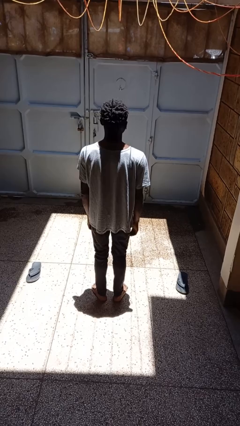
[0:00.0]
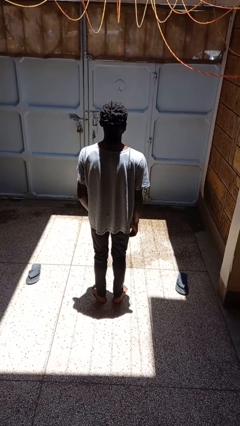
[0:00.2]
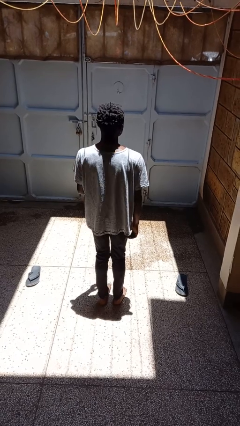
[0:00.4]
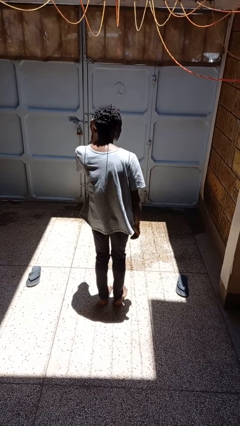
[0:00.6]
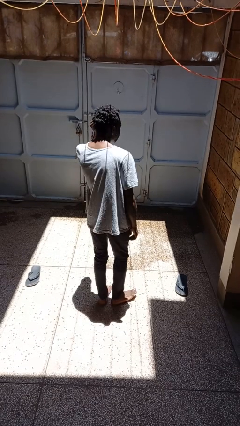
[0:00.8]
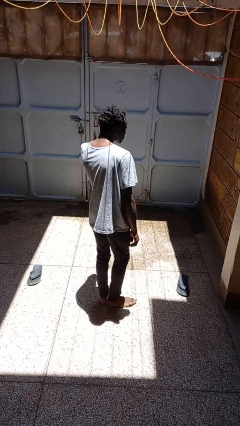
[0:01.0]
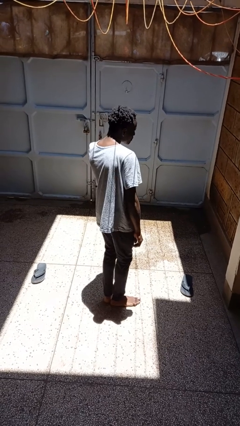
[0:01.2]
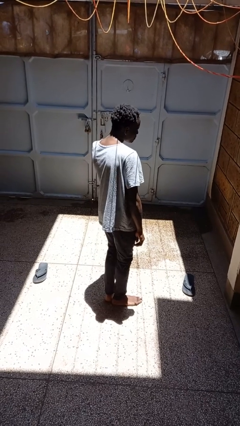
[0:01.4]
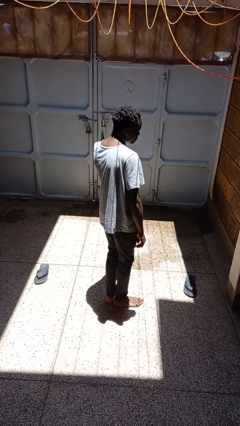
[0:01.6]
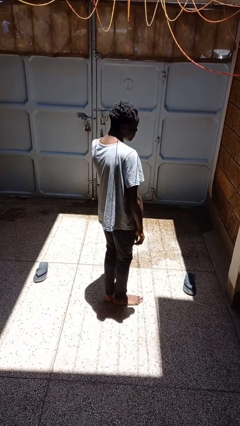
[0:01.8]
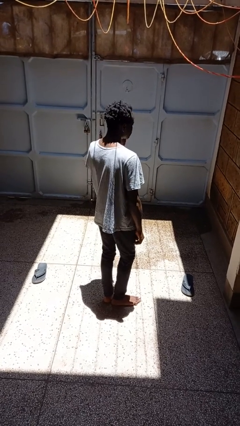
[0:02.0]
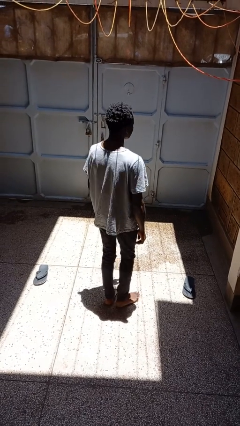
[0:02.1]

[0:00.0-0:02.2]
person touches earlobe

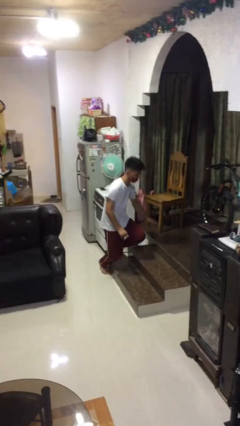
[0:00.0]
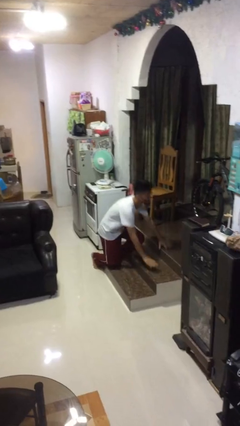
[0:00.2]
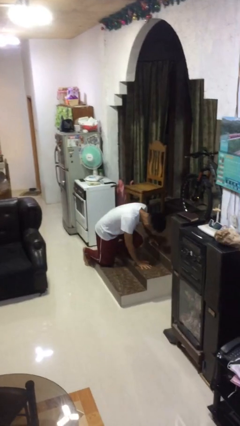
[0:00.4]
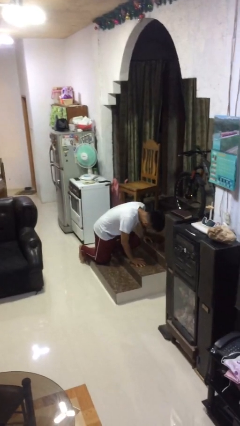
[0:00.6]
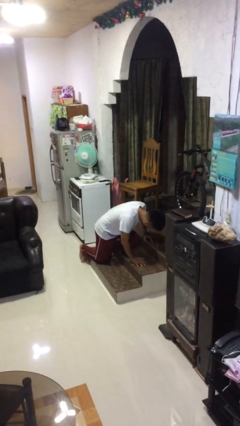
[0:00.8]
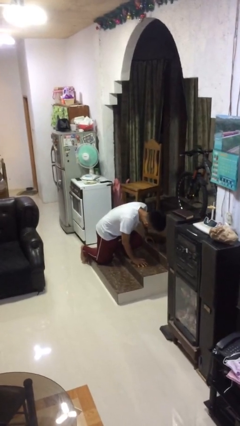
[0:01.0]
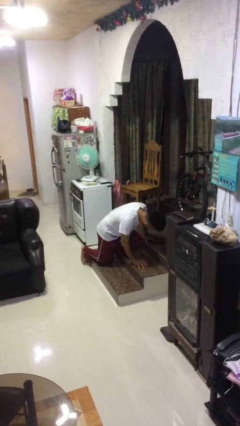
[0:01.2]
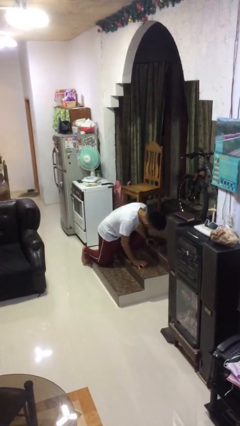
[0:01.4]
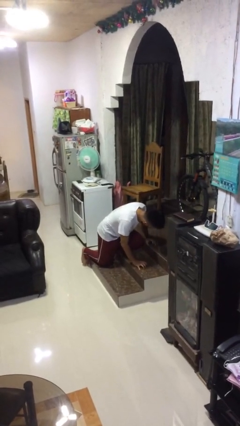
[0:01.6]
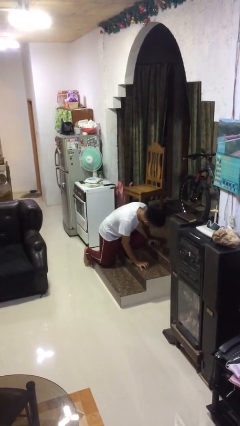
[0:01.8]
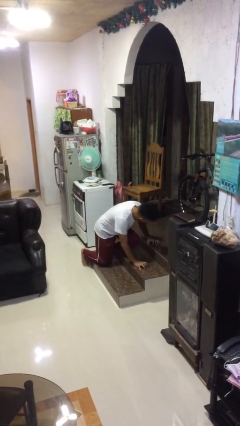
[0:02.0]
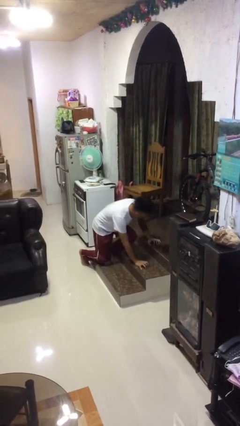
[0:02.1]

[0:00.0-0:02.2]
person trips on object on floor

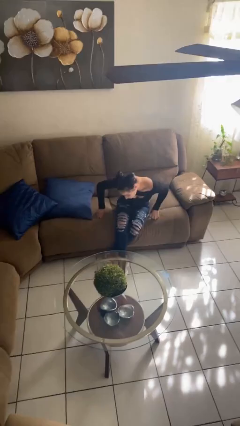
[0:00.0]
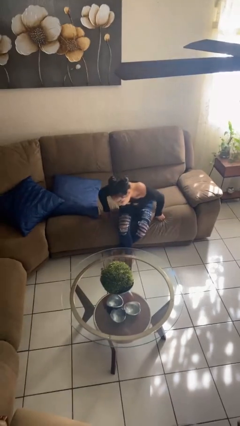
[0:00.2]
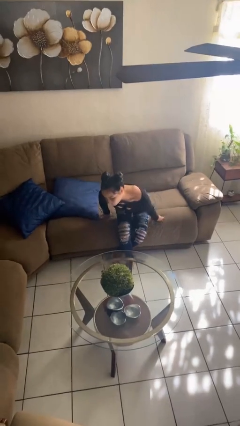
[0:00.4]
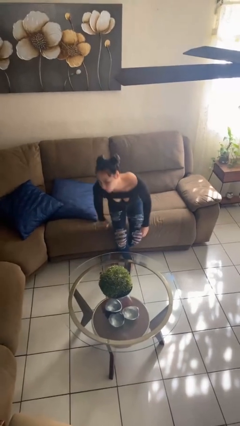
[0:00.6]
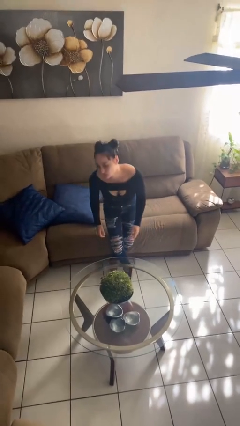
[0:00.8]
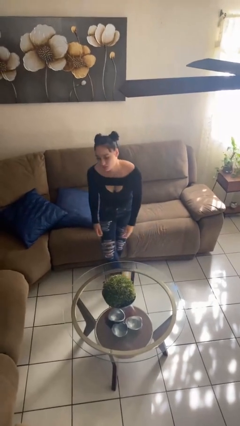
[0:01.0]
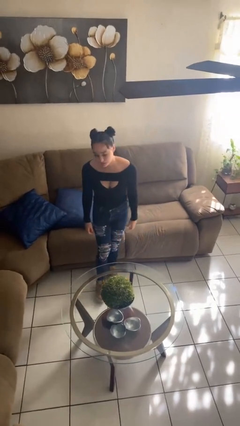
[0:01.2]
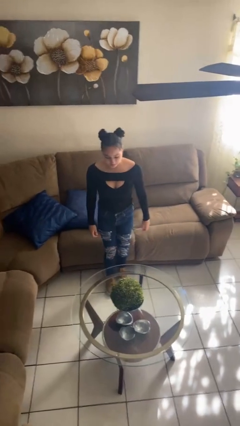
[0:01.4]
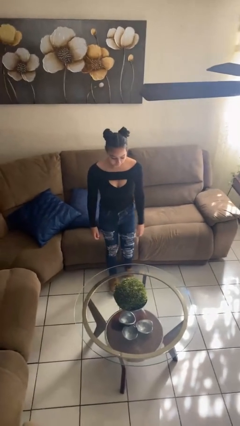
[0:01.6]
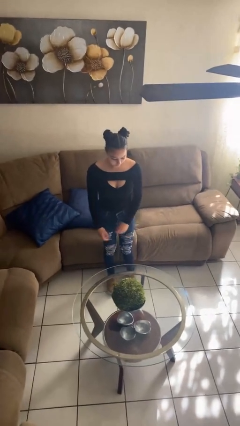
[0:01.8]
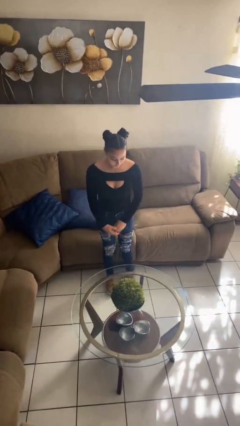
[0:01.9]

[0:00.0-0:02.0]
person stands up

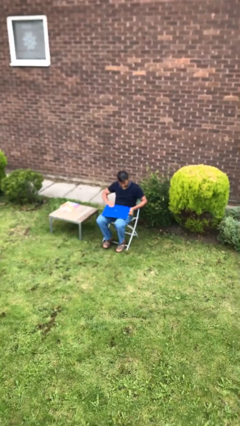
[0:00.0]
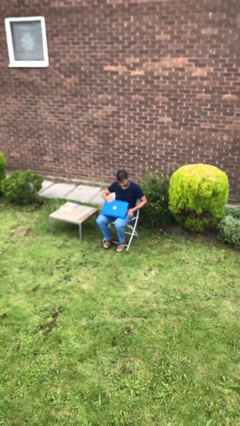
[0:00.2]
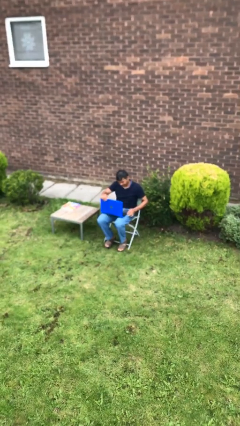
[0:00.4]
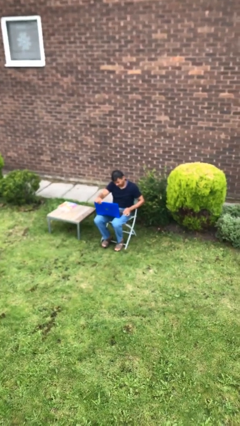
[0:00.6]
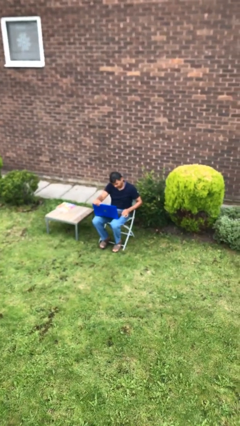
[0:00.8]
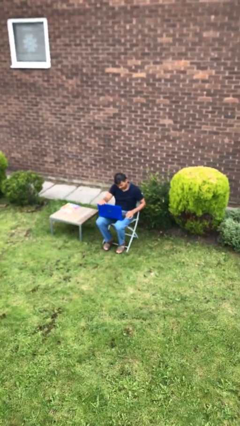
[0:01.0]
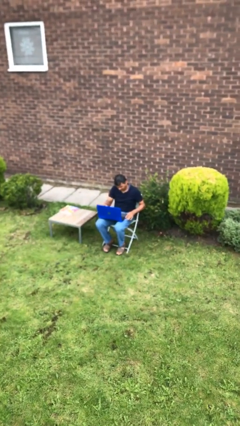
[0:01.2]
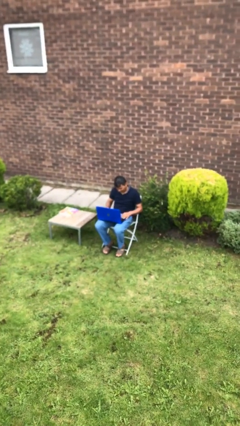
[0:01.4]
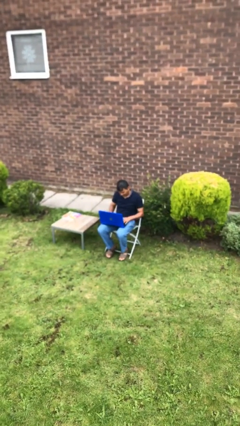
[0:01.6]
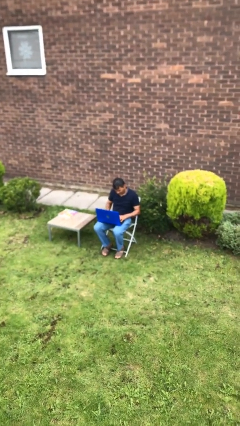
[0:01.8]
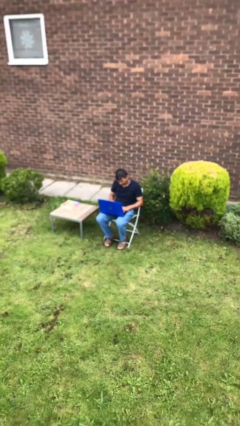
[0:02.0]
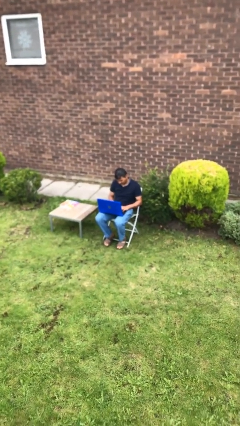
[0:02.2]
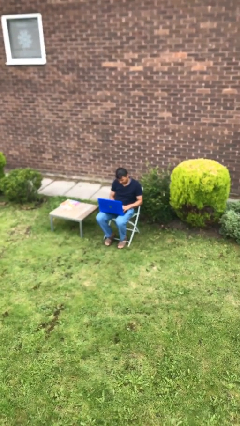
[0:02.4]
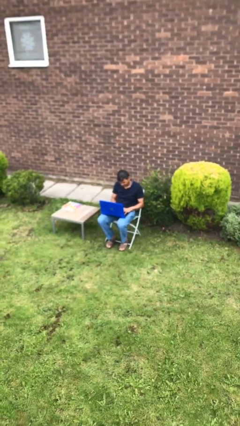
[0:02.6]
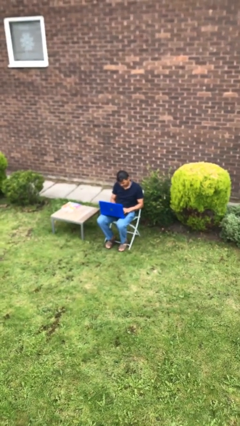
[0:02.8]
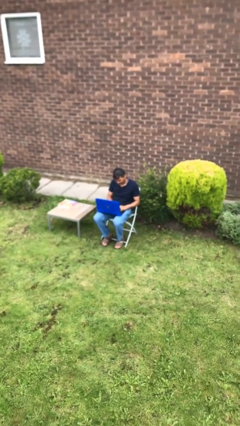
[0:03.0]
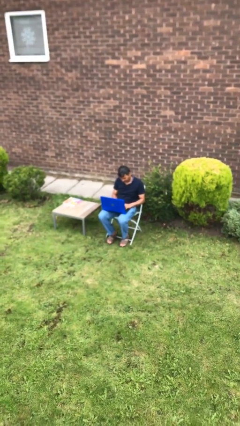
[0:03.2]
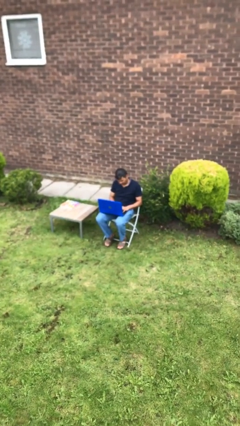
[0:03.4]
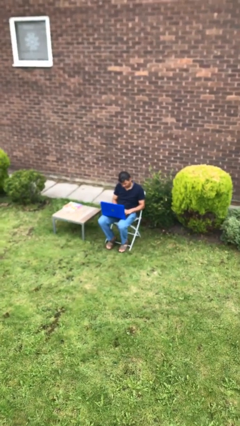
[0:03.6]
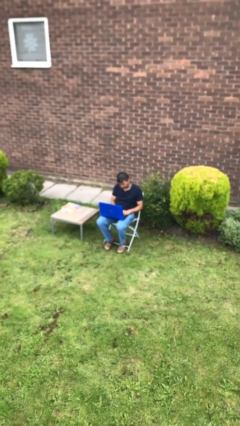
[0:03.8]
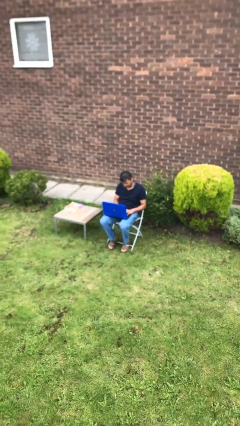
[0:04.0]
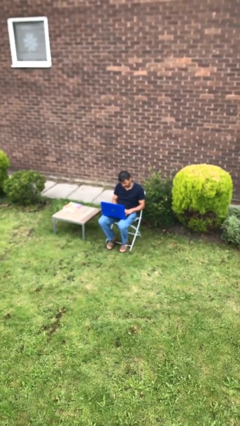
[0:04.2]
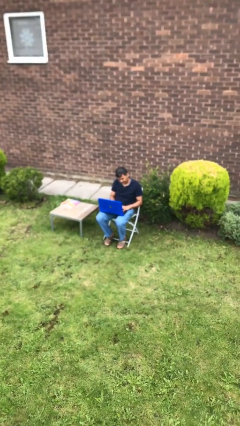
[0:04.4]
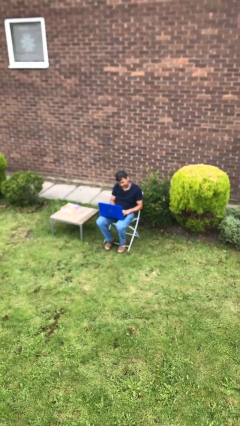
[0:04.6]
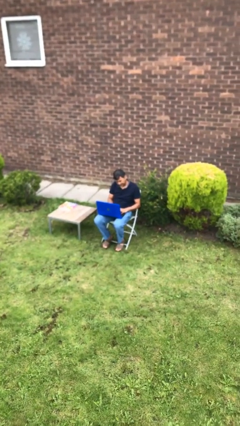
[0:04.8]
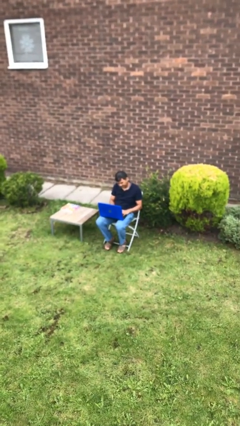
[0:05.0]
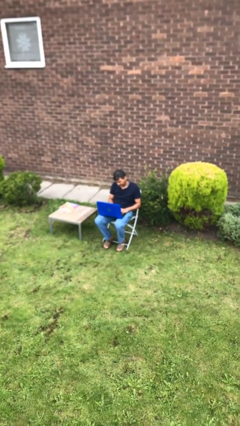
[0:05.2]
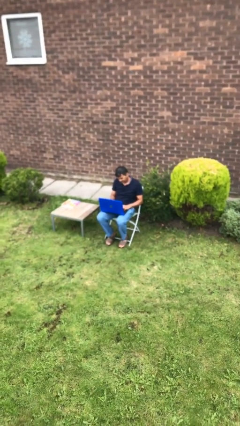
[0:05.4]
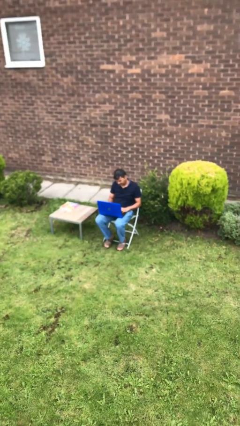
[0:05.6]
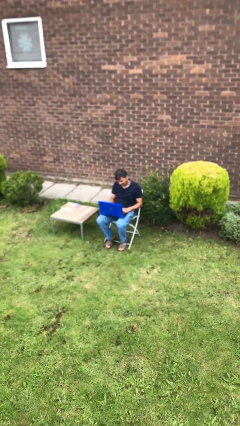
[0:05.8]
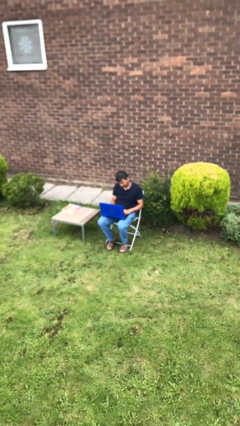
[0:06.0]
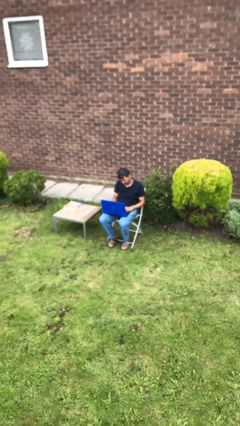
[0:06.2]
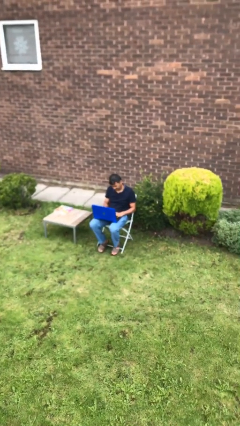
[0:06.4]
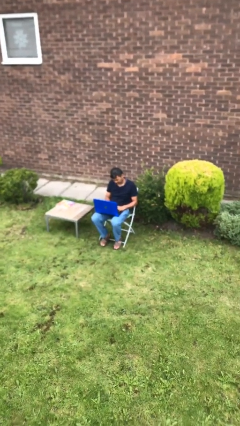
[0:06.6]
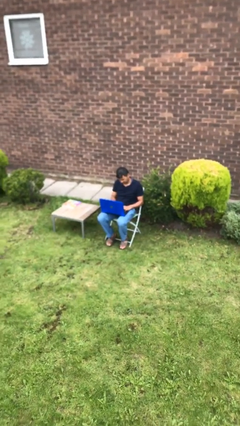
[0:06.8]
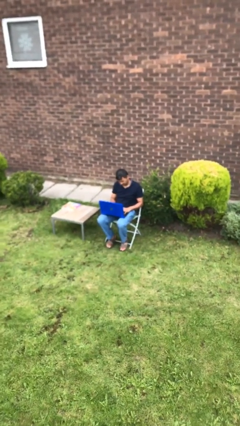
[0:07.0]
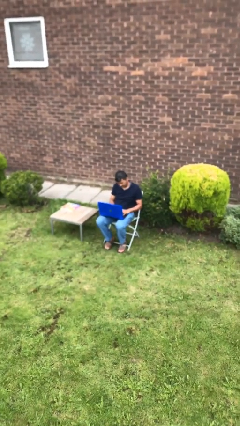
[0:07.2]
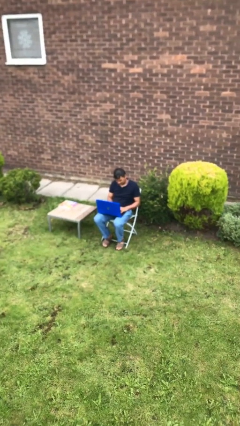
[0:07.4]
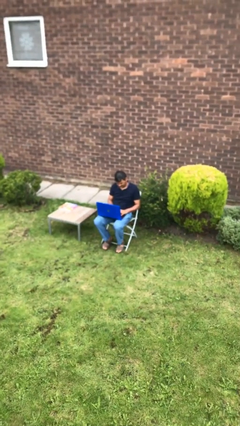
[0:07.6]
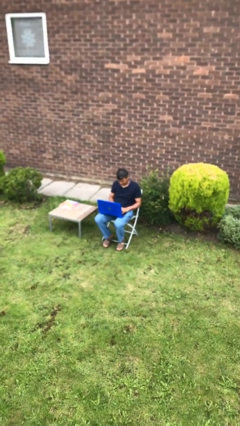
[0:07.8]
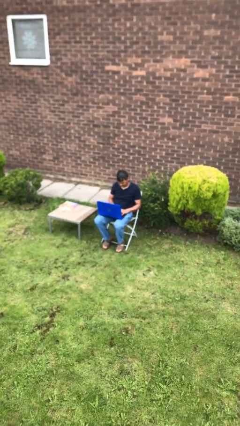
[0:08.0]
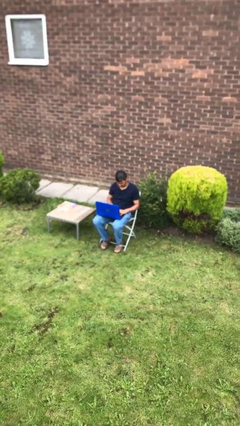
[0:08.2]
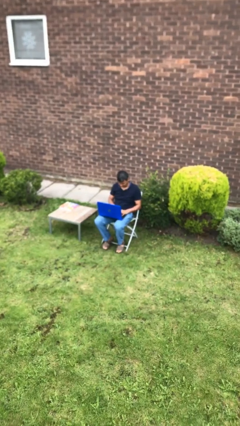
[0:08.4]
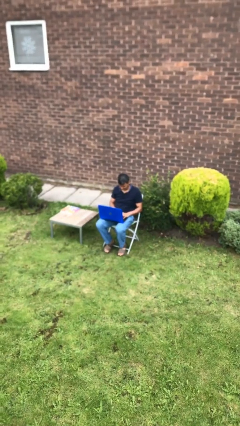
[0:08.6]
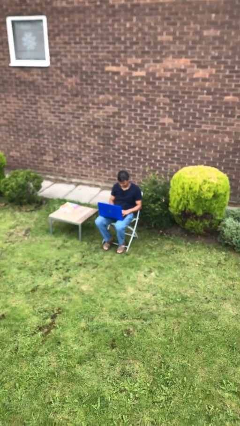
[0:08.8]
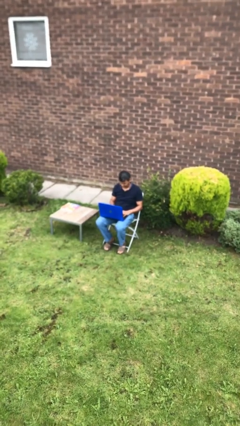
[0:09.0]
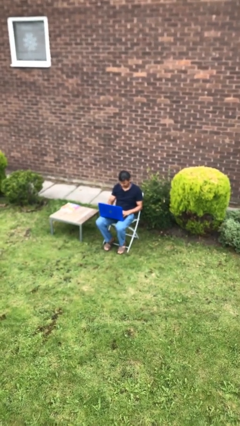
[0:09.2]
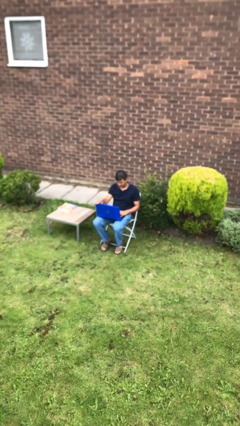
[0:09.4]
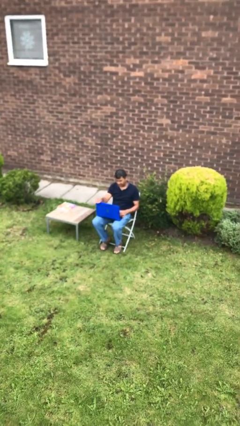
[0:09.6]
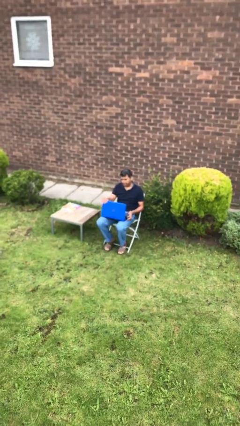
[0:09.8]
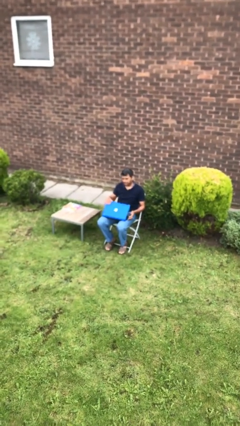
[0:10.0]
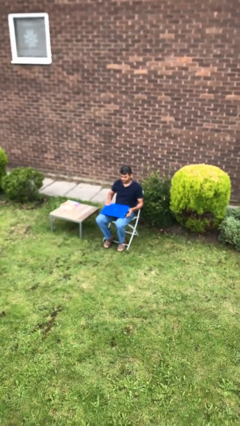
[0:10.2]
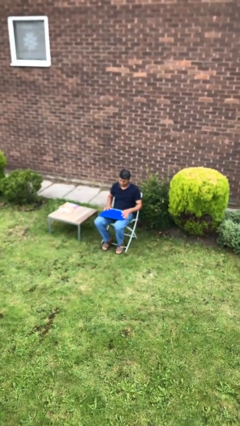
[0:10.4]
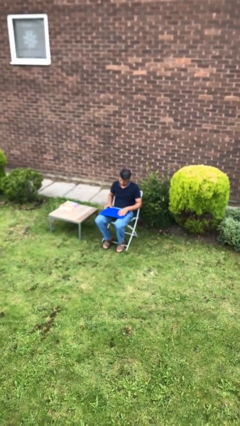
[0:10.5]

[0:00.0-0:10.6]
person interacts with laptop

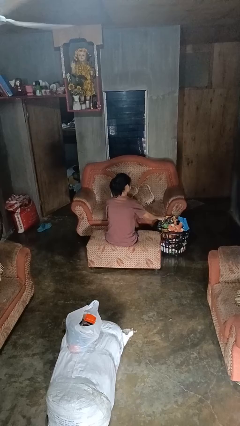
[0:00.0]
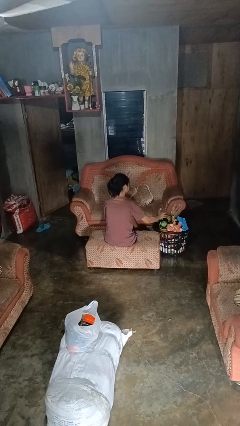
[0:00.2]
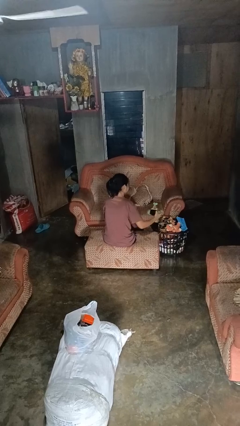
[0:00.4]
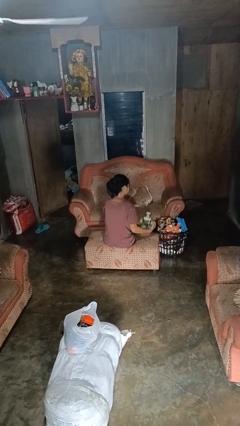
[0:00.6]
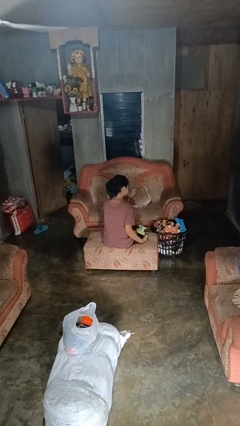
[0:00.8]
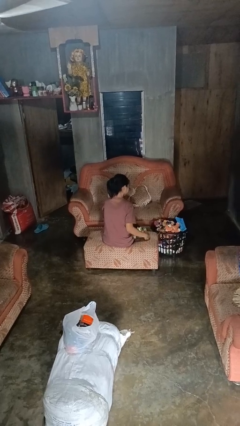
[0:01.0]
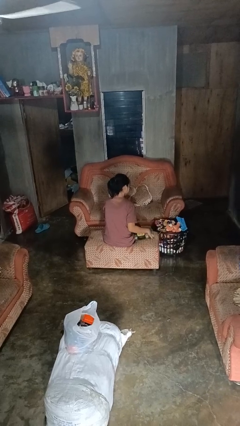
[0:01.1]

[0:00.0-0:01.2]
person takes object from basket
